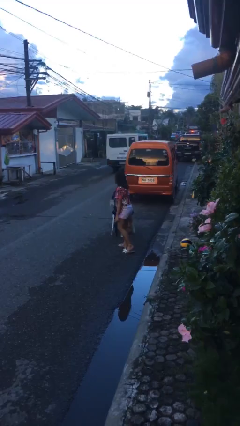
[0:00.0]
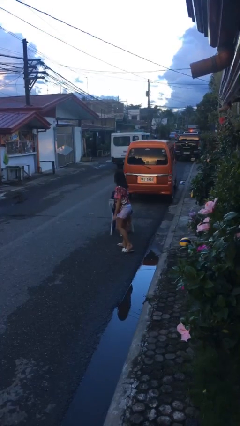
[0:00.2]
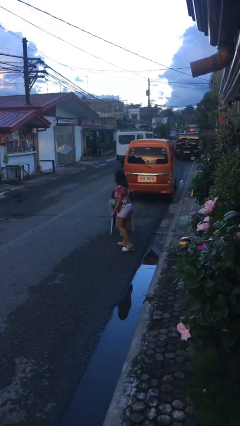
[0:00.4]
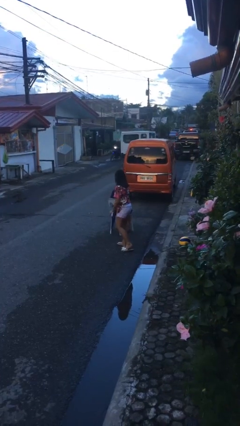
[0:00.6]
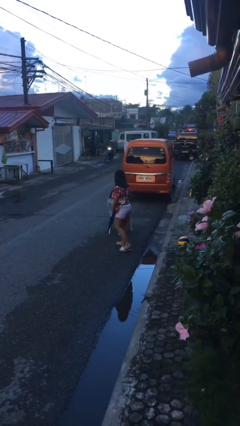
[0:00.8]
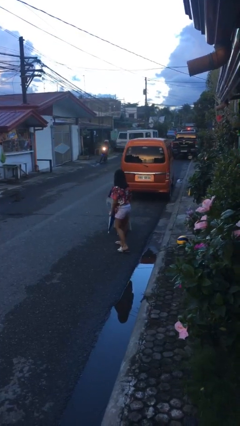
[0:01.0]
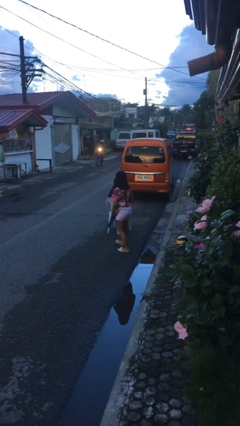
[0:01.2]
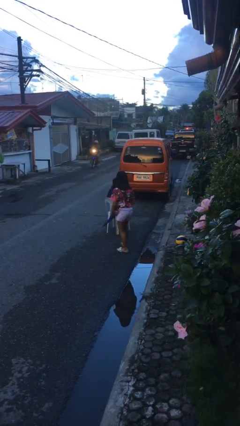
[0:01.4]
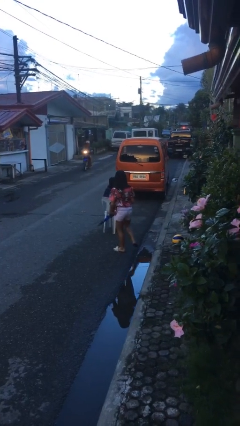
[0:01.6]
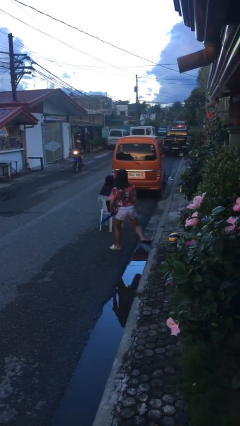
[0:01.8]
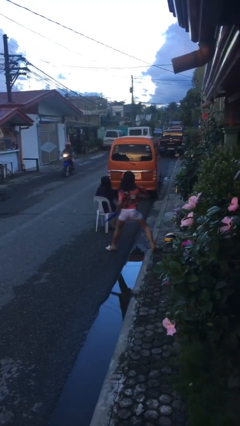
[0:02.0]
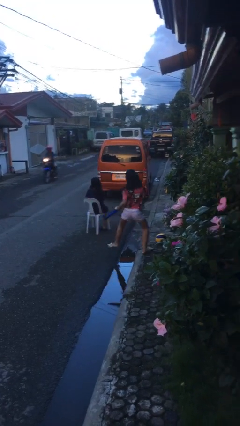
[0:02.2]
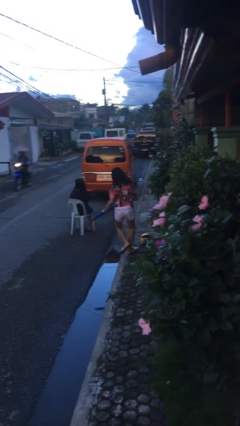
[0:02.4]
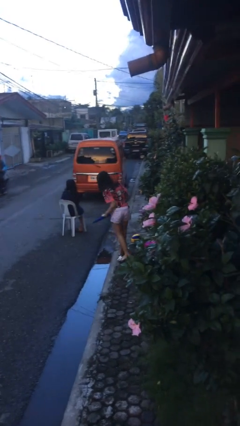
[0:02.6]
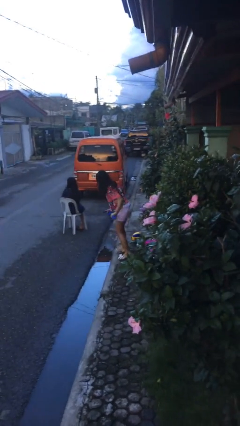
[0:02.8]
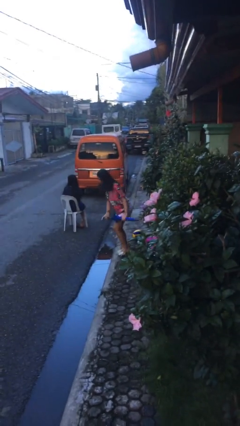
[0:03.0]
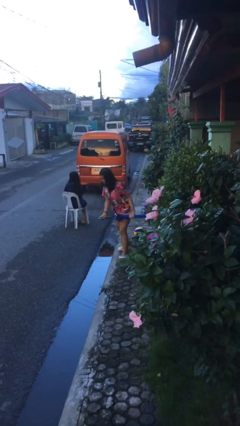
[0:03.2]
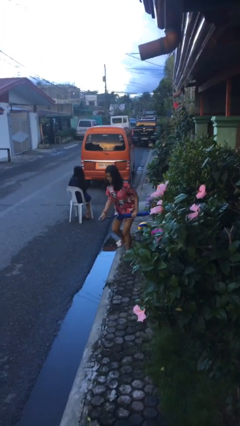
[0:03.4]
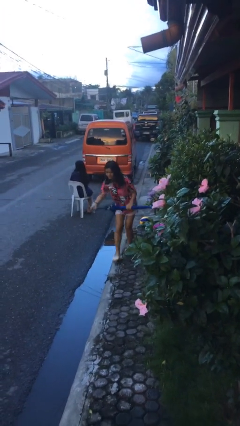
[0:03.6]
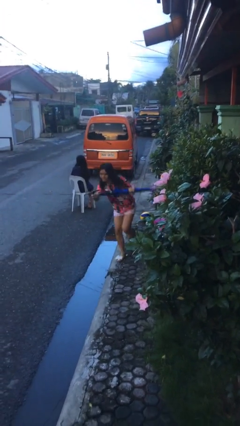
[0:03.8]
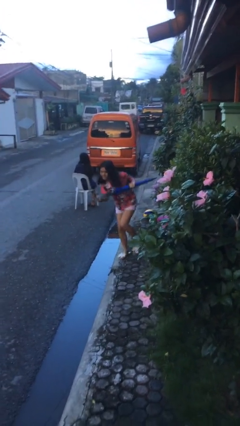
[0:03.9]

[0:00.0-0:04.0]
person steals object from person

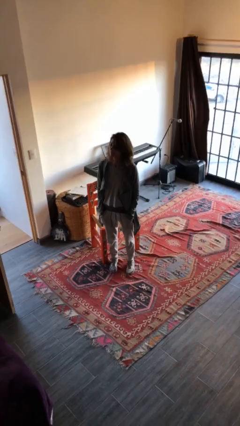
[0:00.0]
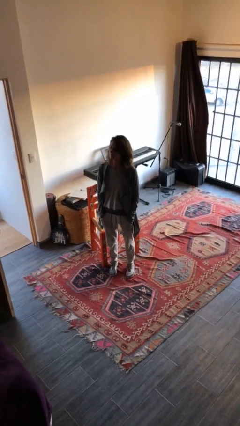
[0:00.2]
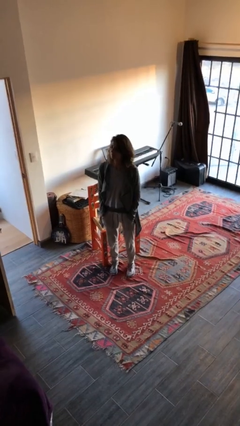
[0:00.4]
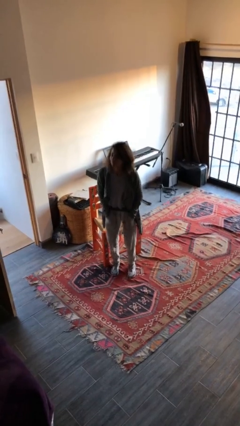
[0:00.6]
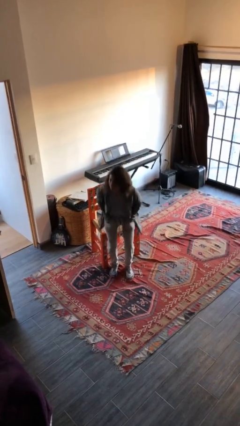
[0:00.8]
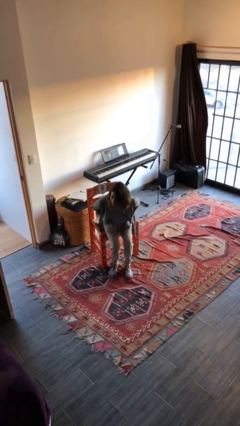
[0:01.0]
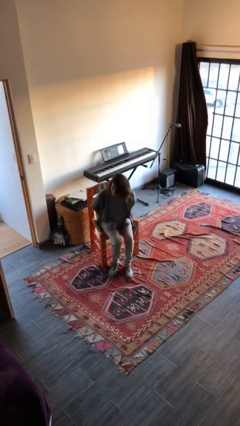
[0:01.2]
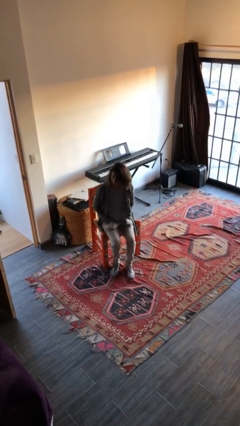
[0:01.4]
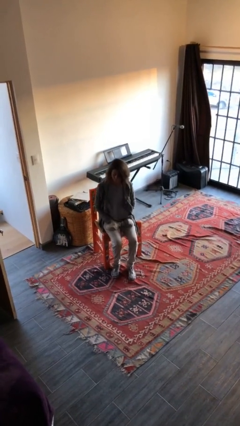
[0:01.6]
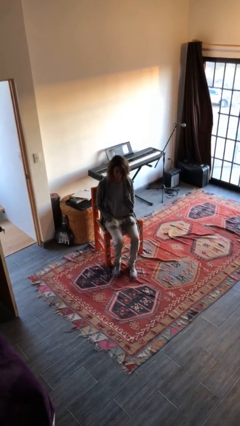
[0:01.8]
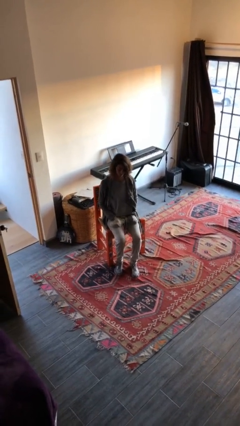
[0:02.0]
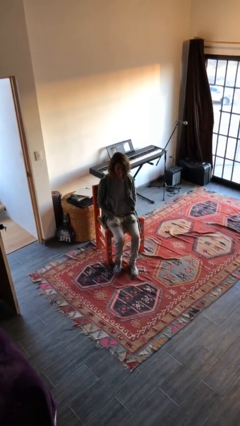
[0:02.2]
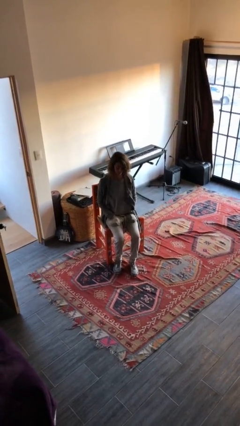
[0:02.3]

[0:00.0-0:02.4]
person sits down

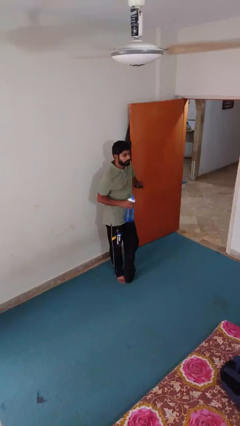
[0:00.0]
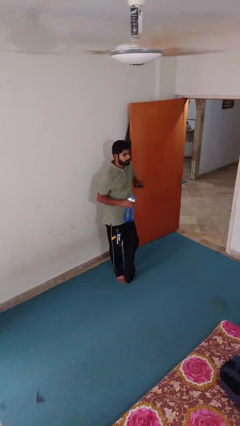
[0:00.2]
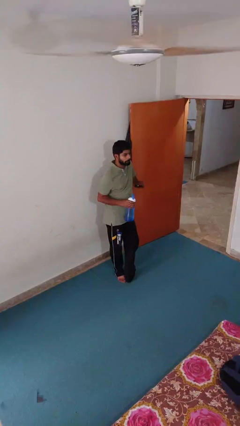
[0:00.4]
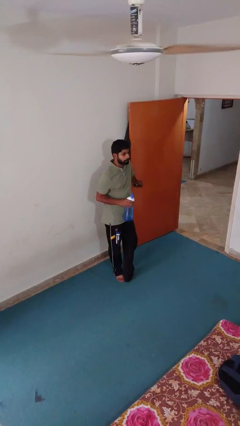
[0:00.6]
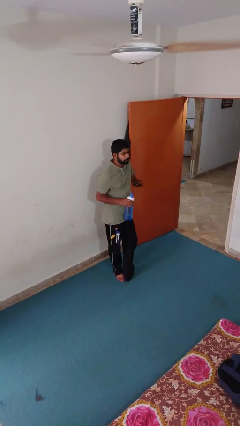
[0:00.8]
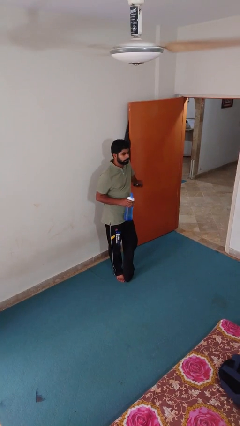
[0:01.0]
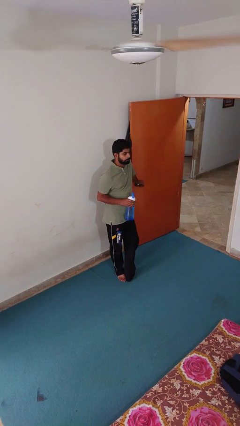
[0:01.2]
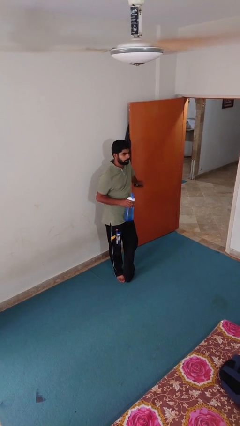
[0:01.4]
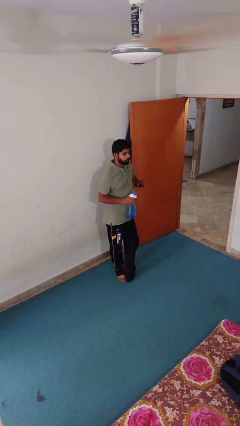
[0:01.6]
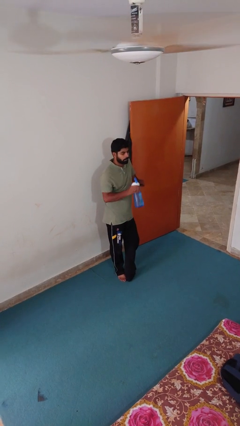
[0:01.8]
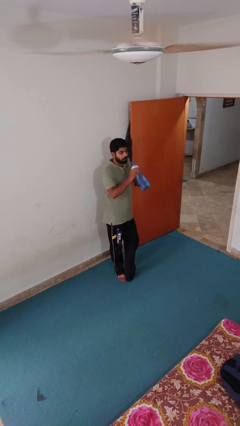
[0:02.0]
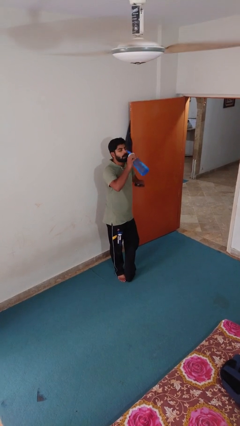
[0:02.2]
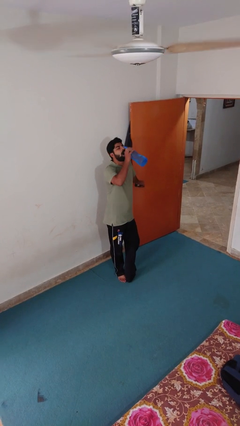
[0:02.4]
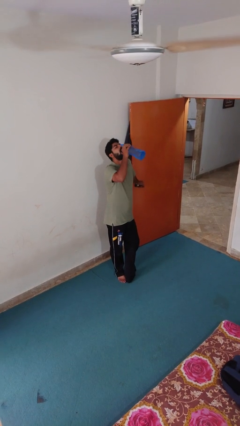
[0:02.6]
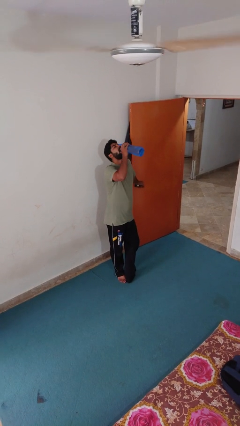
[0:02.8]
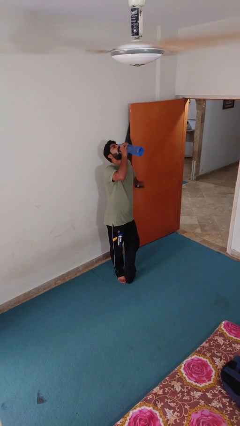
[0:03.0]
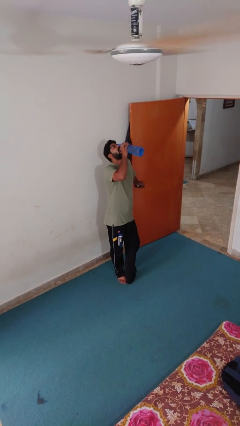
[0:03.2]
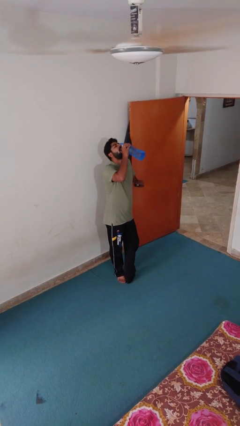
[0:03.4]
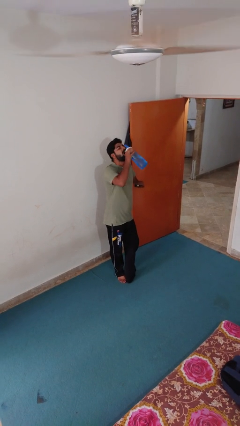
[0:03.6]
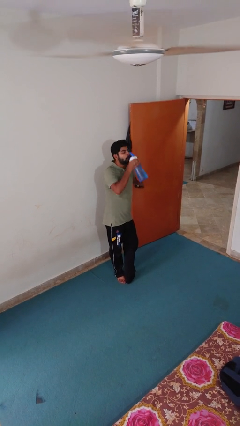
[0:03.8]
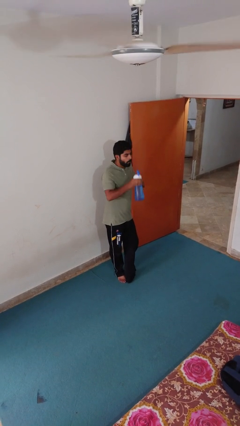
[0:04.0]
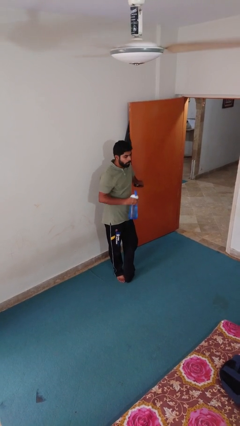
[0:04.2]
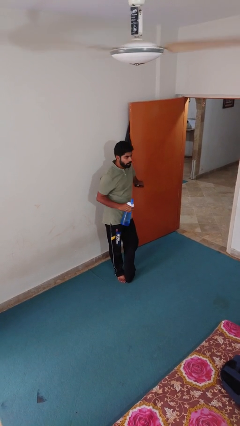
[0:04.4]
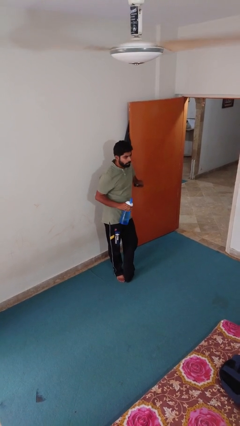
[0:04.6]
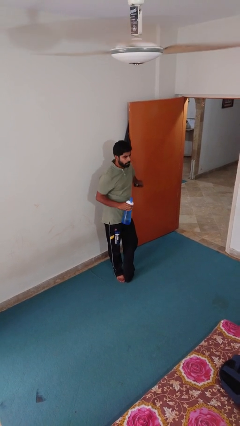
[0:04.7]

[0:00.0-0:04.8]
person drinks from bottle

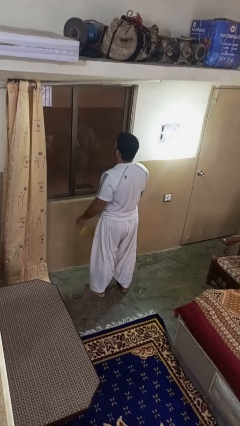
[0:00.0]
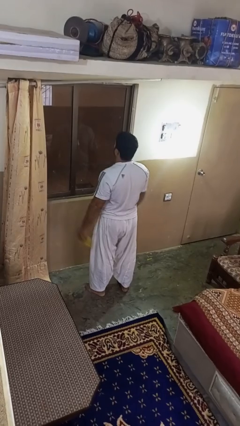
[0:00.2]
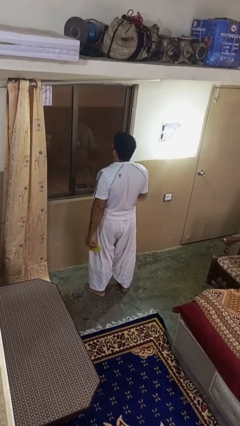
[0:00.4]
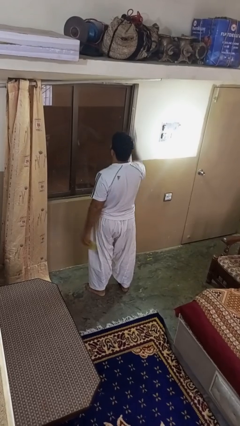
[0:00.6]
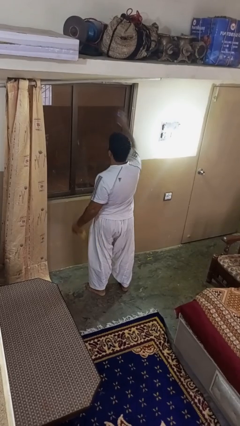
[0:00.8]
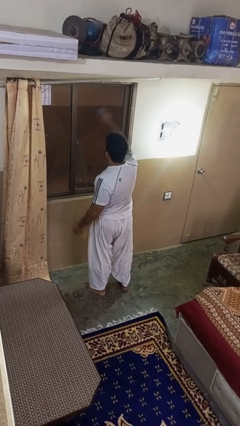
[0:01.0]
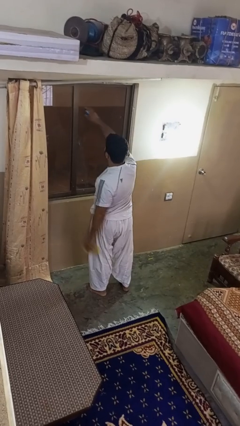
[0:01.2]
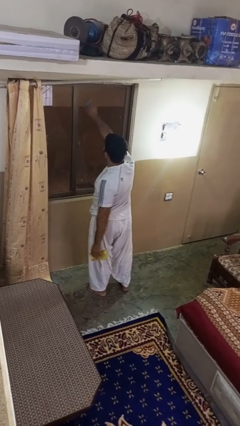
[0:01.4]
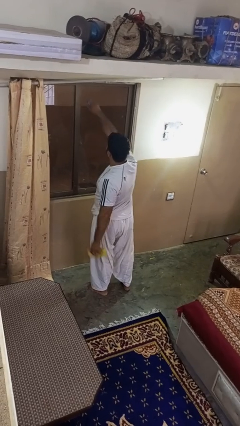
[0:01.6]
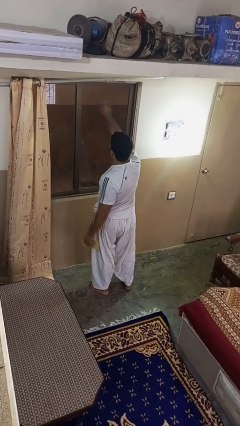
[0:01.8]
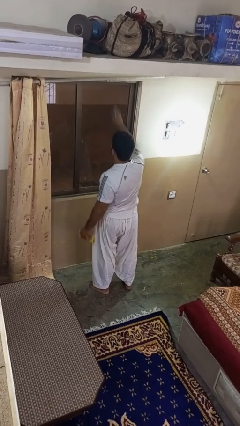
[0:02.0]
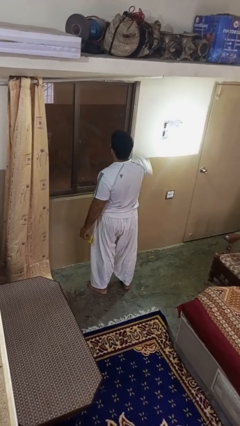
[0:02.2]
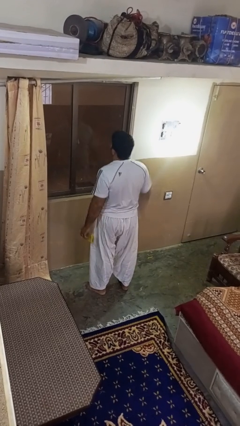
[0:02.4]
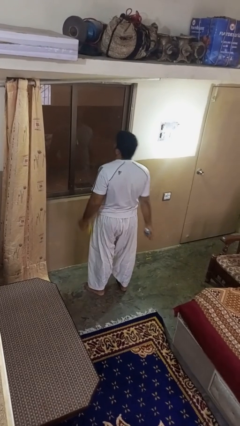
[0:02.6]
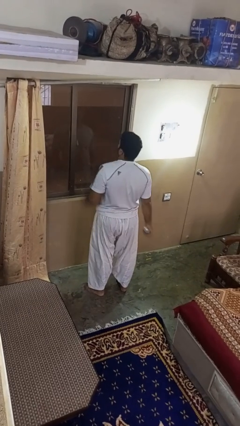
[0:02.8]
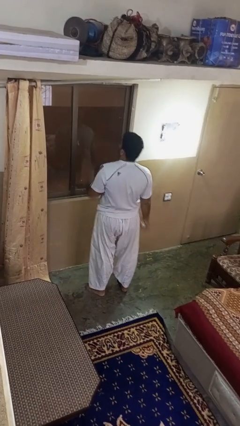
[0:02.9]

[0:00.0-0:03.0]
person sprays from bottle

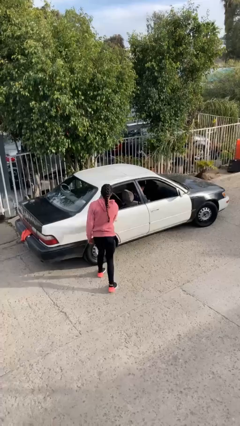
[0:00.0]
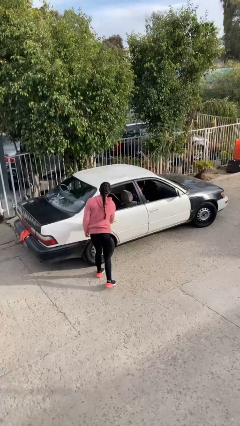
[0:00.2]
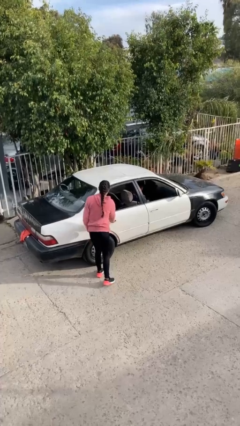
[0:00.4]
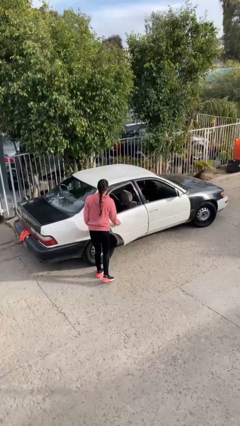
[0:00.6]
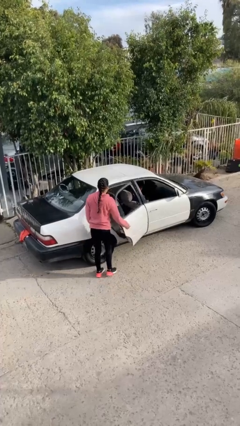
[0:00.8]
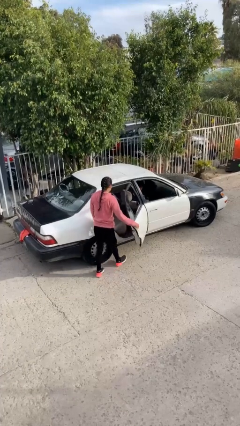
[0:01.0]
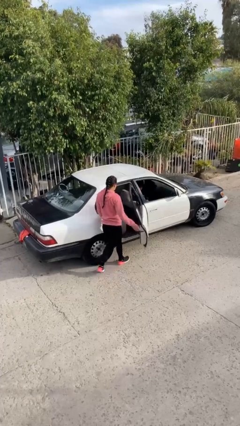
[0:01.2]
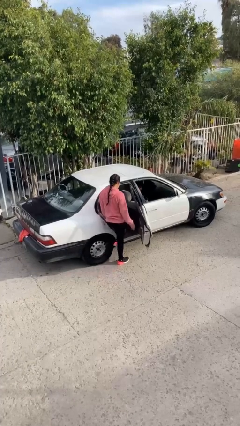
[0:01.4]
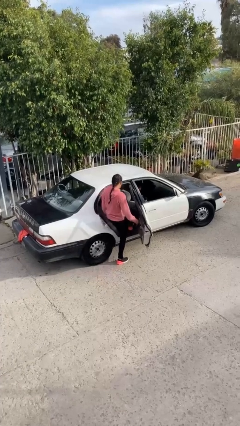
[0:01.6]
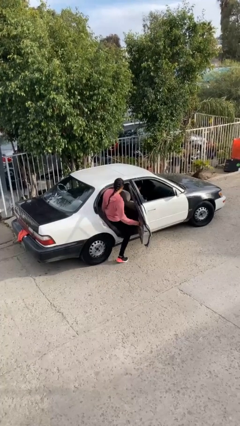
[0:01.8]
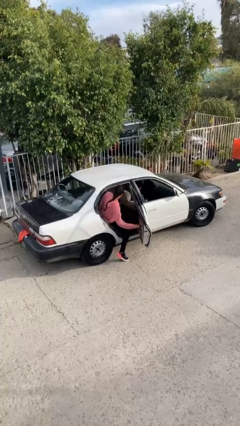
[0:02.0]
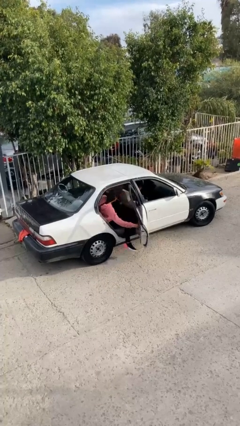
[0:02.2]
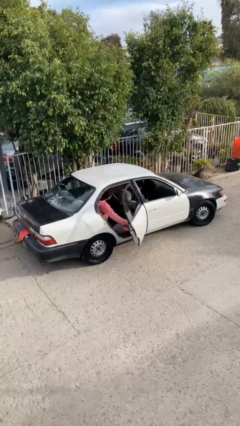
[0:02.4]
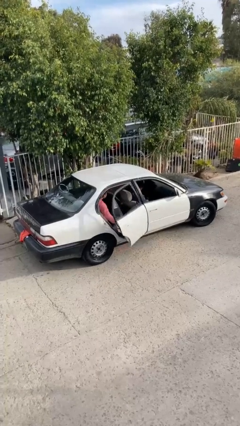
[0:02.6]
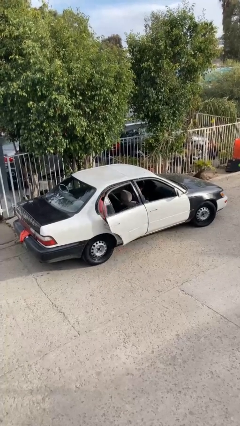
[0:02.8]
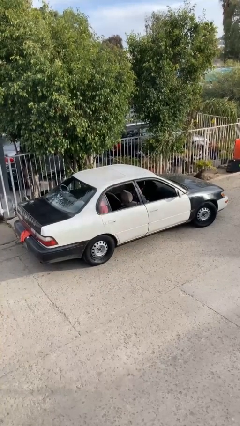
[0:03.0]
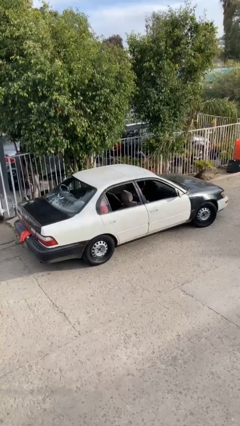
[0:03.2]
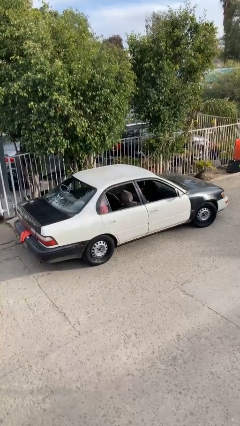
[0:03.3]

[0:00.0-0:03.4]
car picks up person
